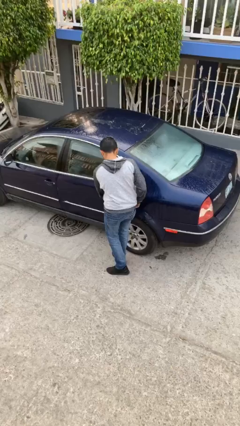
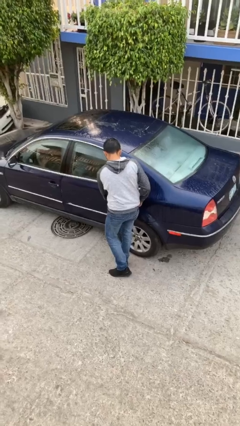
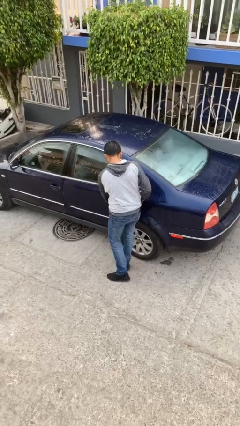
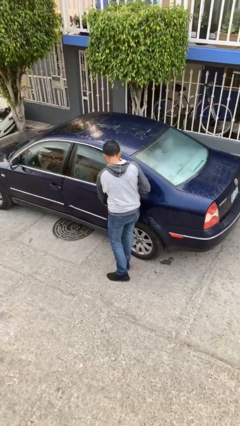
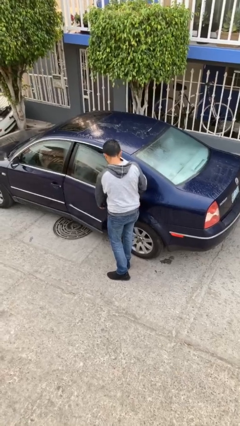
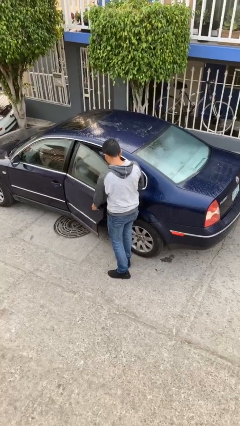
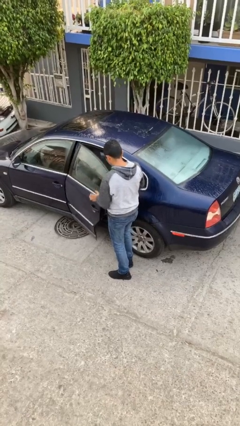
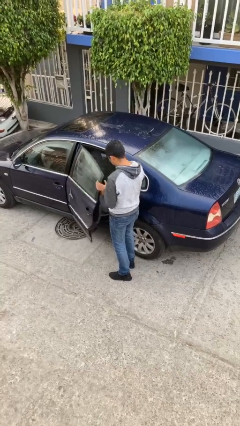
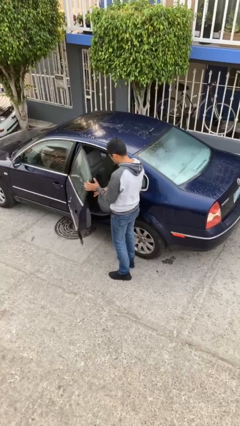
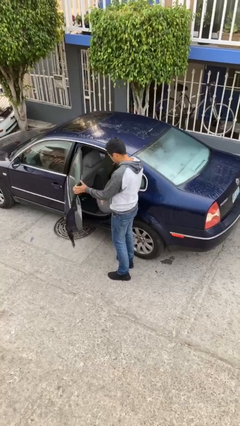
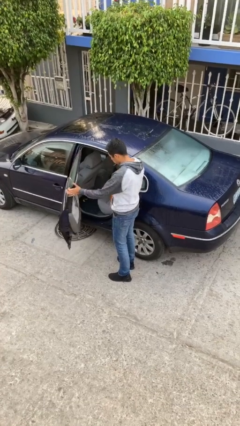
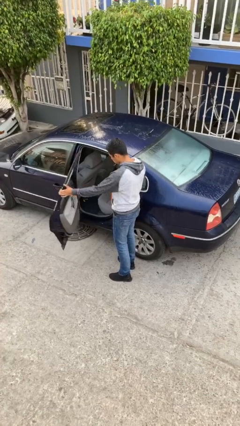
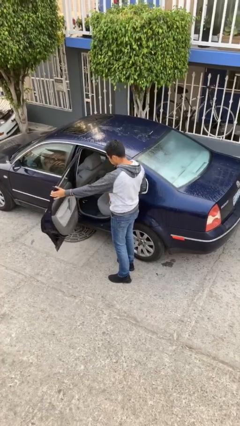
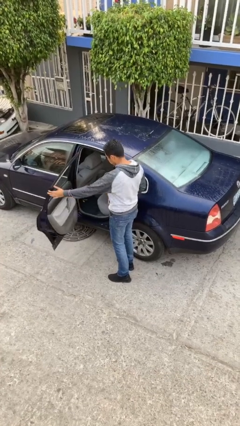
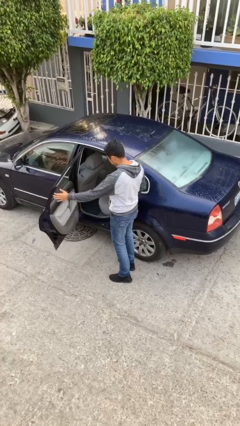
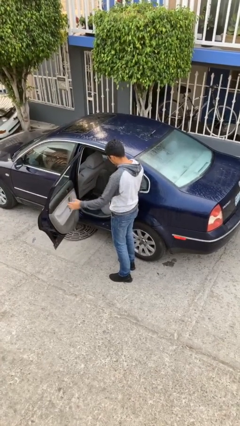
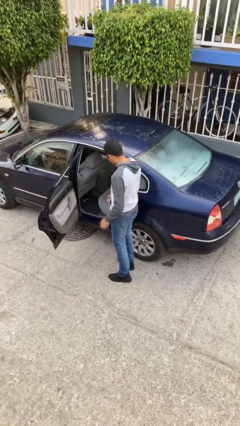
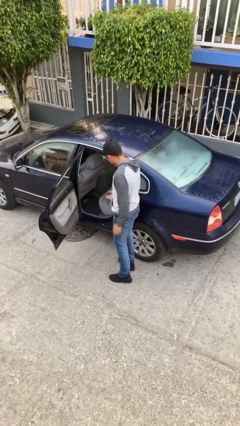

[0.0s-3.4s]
person opens car door

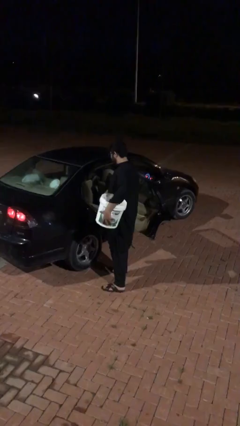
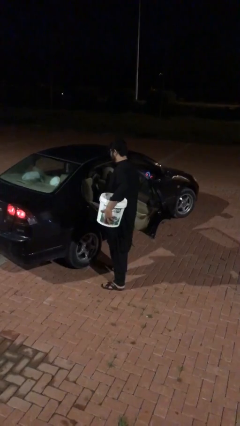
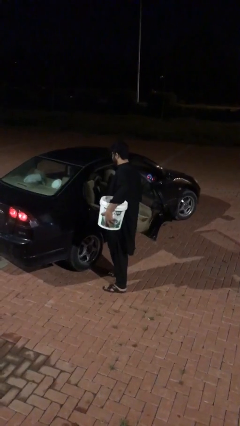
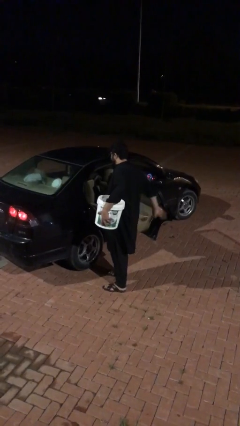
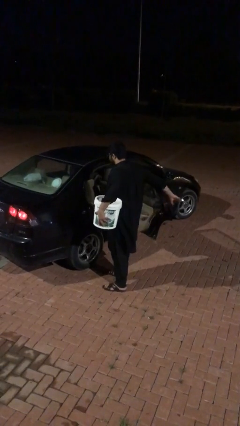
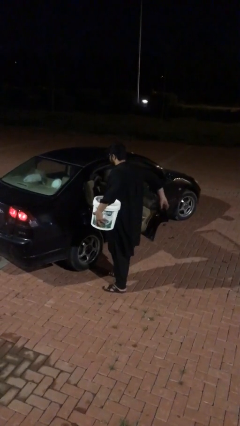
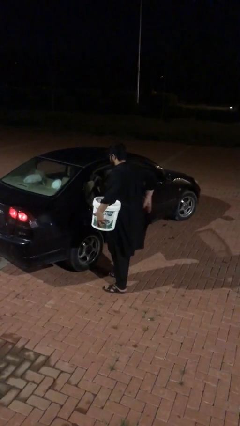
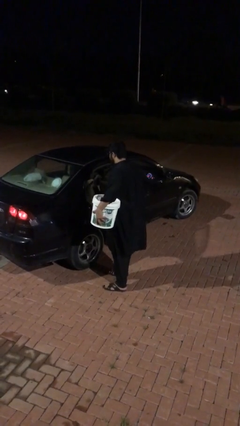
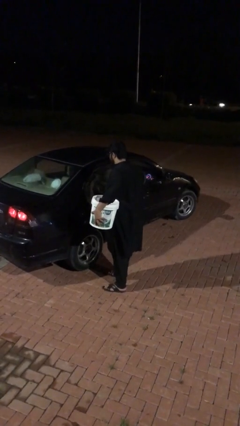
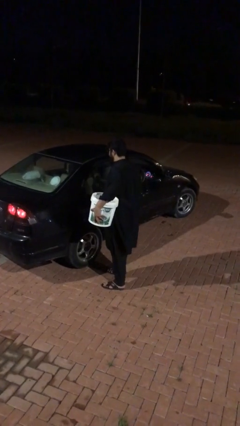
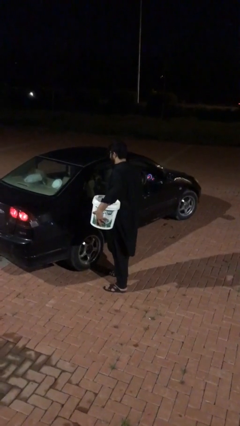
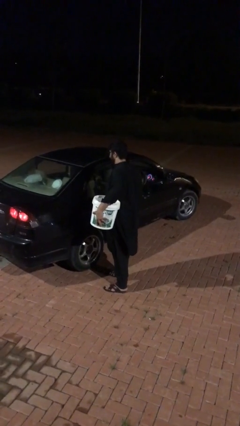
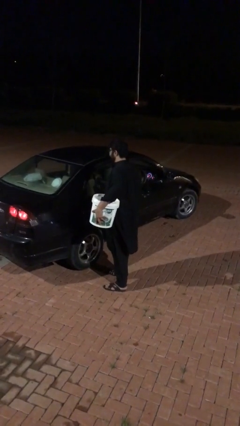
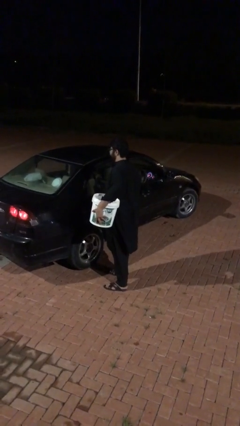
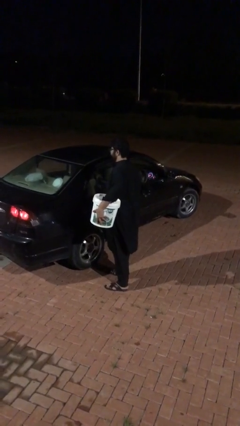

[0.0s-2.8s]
person closes car door

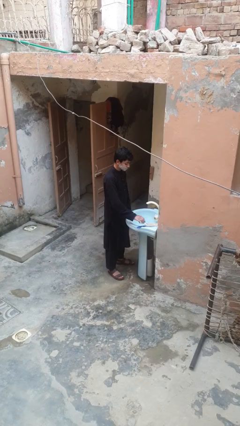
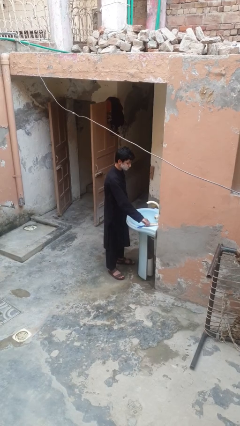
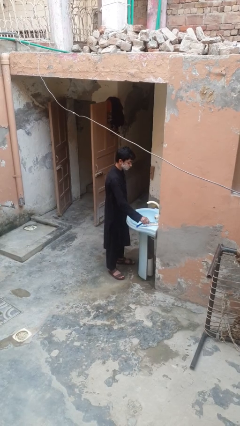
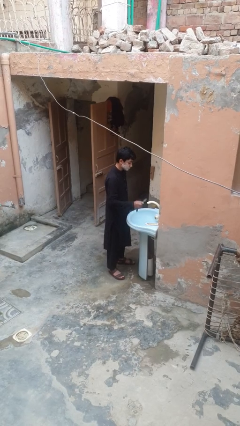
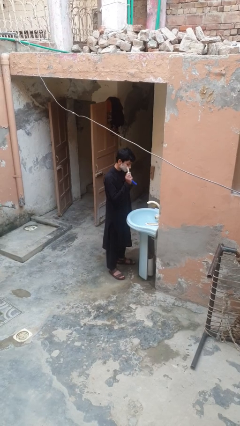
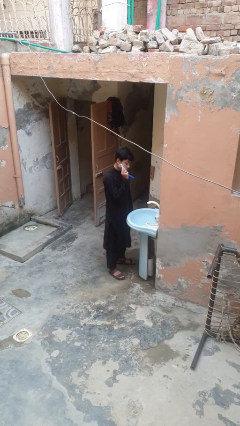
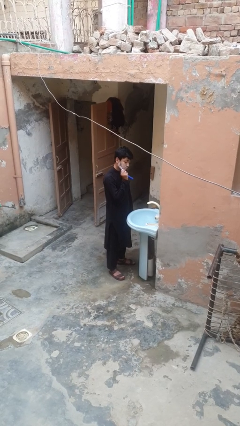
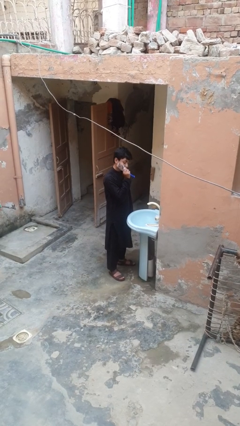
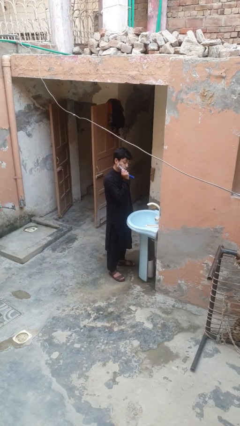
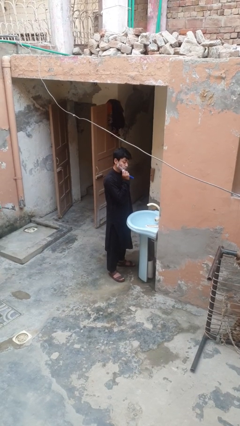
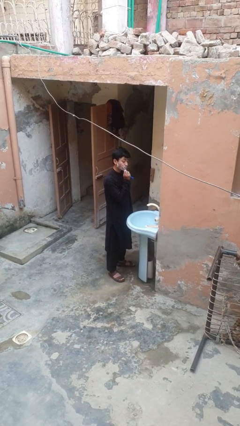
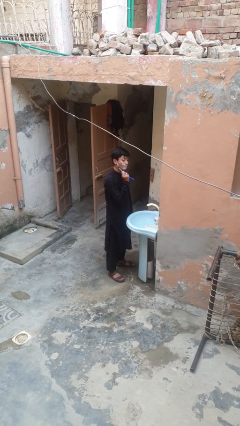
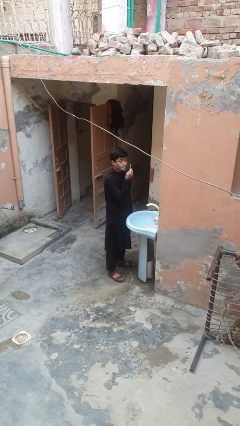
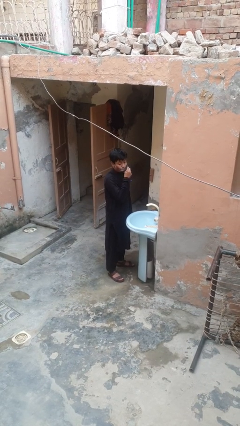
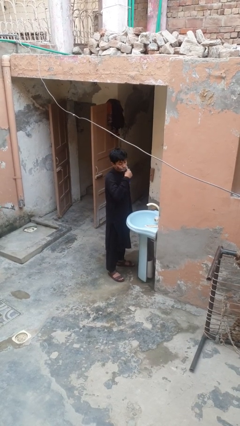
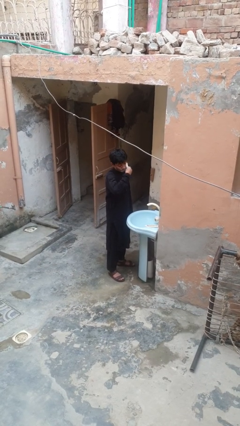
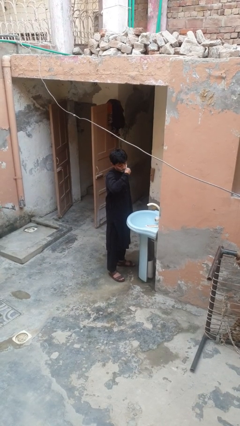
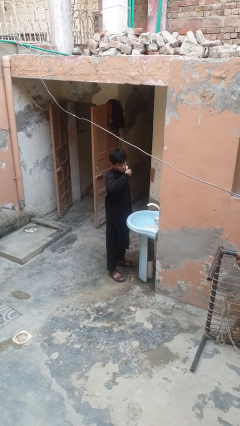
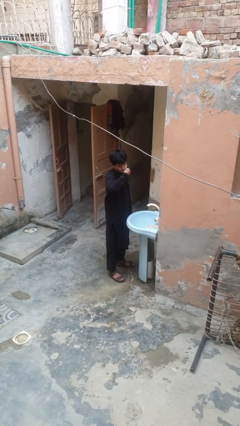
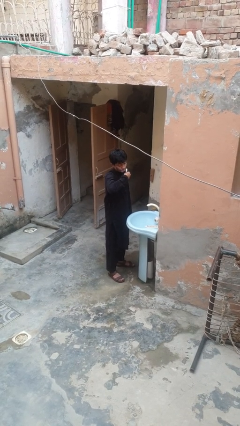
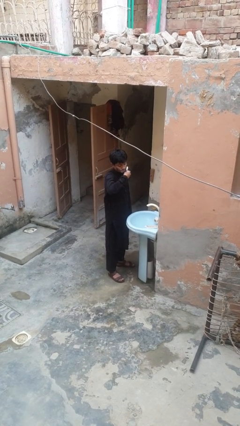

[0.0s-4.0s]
person shaves face

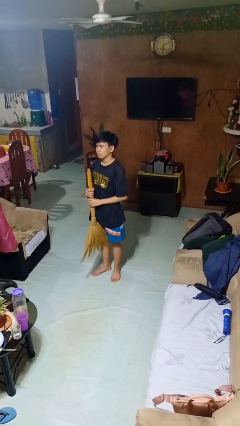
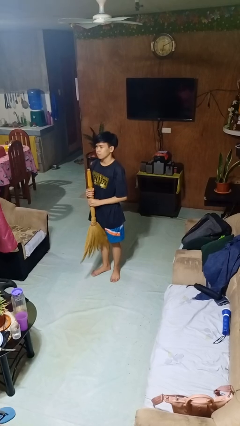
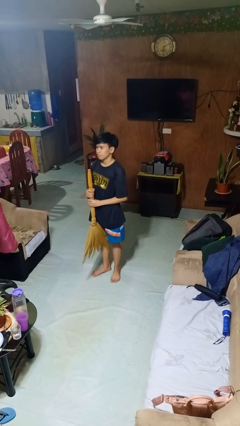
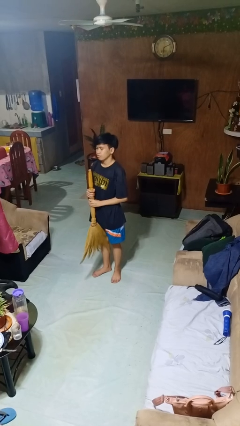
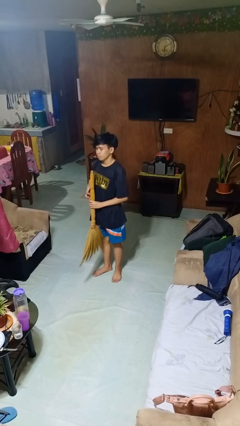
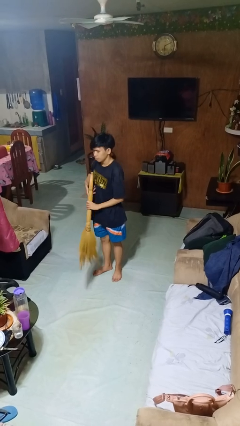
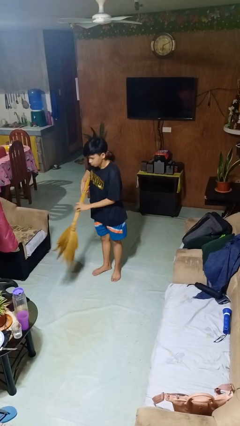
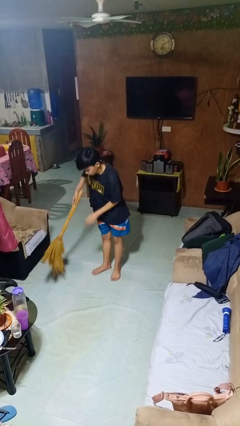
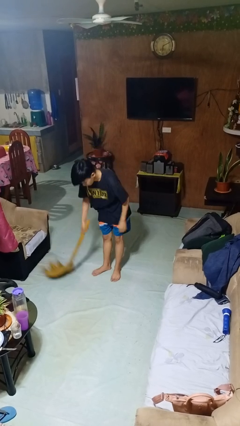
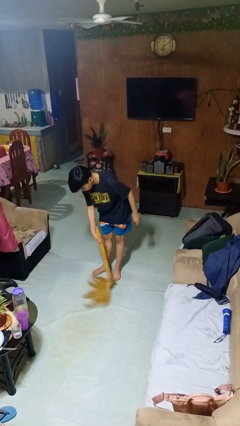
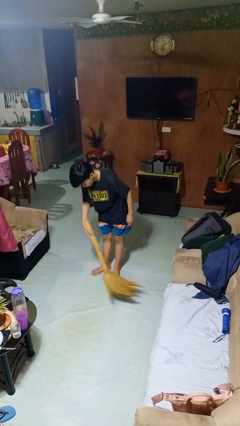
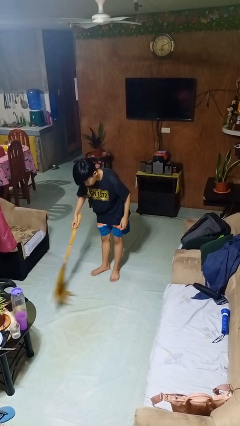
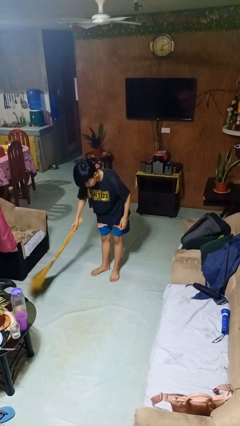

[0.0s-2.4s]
person sweeps floor

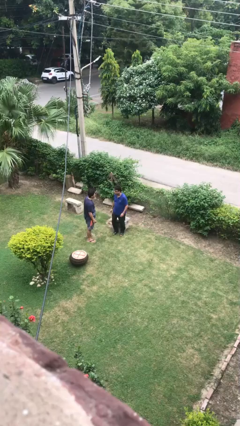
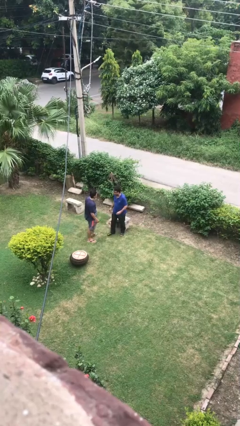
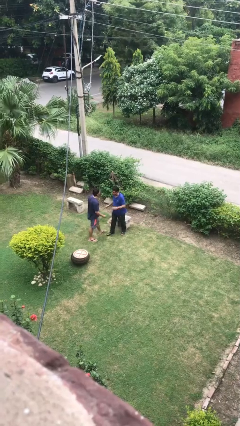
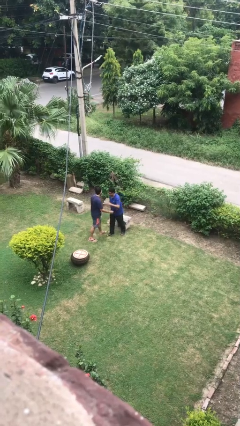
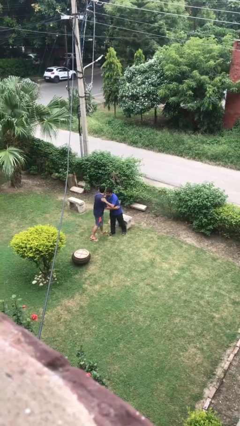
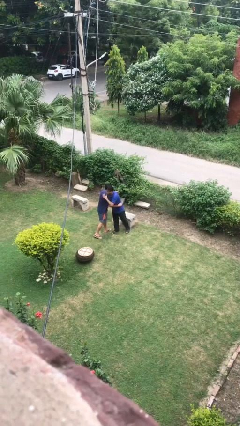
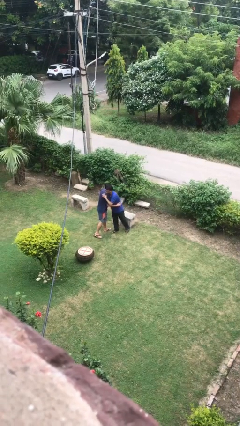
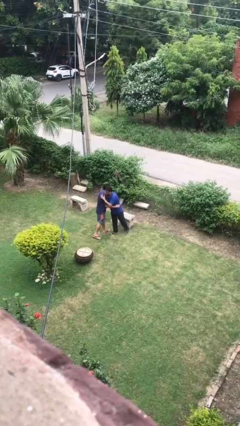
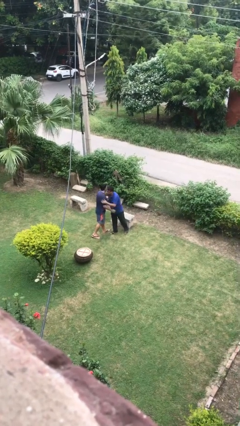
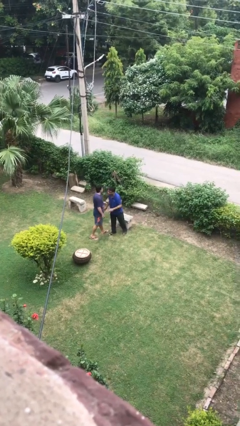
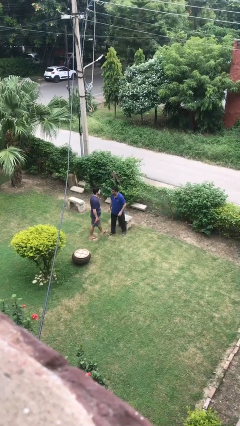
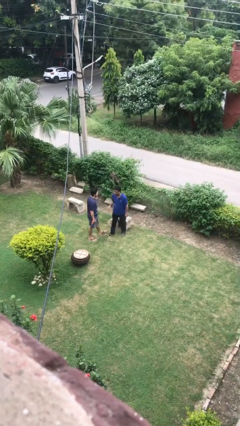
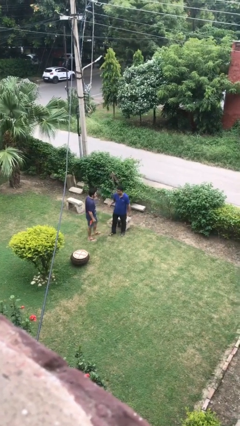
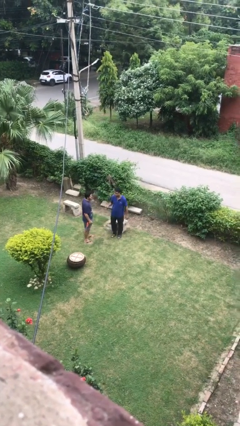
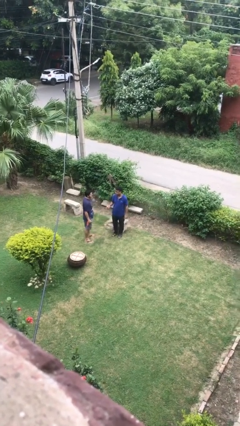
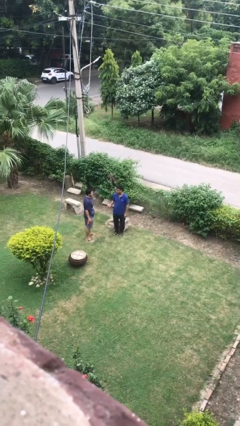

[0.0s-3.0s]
person embraces person

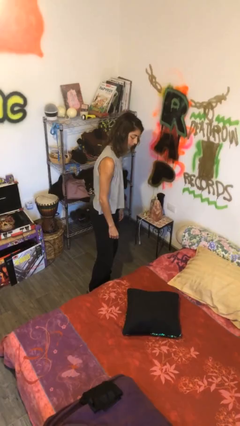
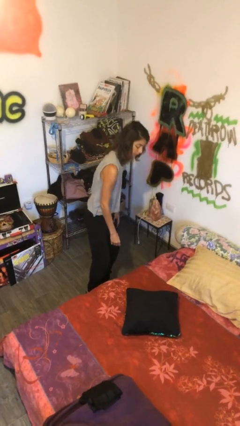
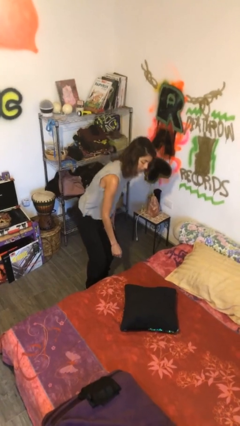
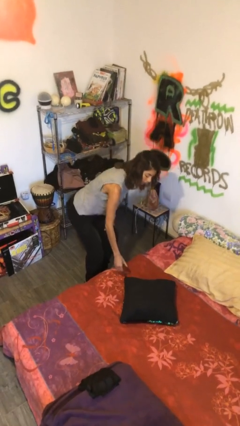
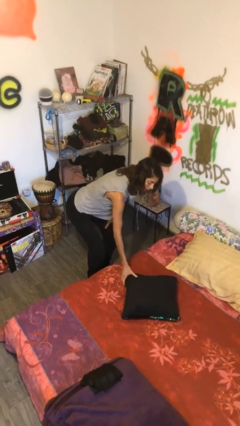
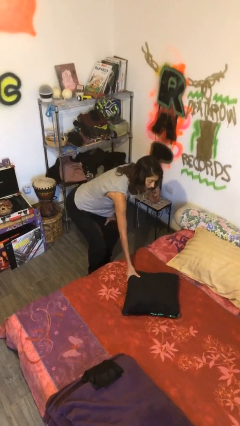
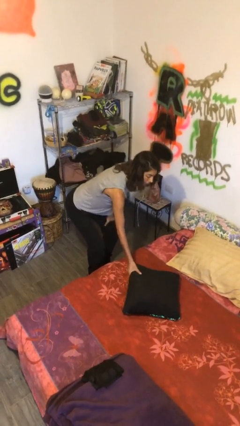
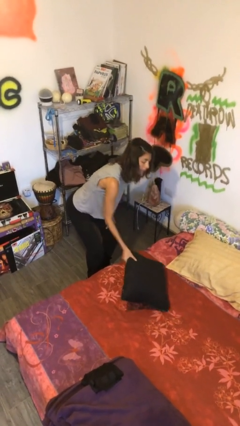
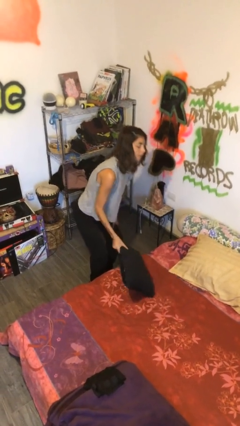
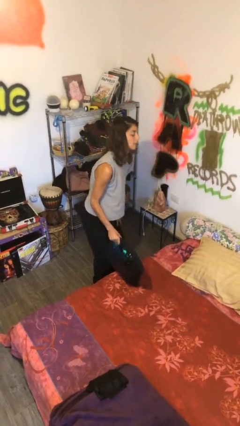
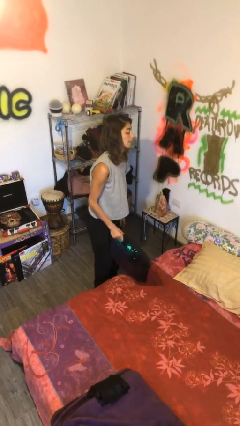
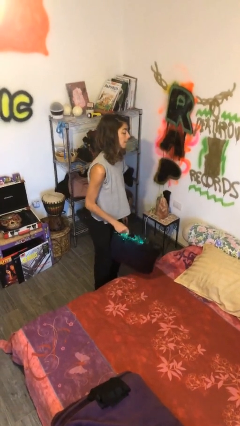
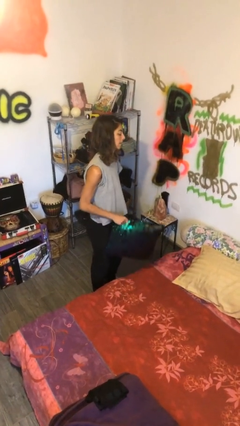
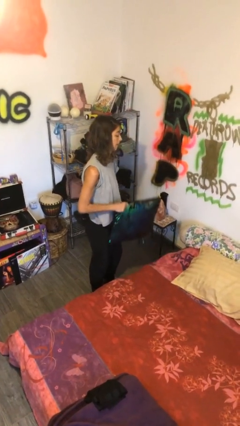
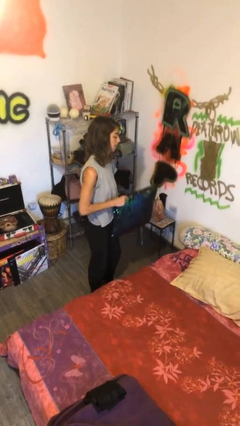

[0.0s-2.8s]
person picks up object from bed
